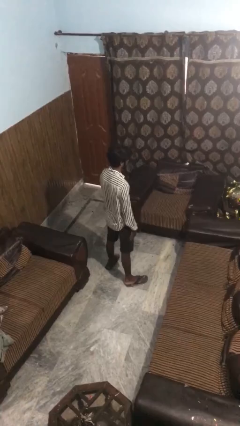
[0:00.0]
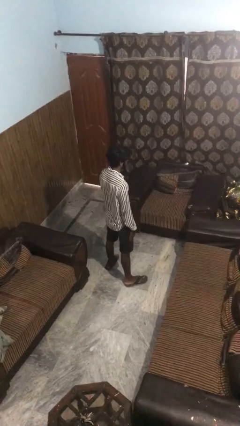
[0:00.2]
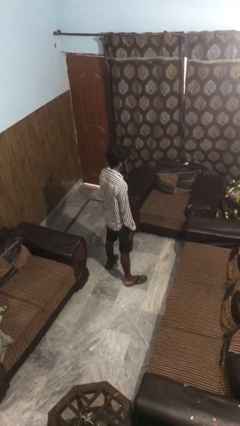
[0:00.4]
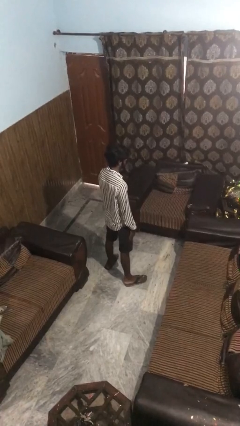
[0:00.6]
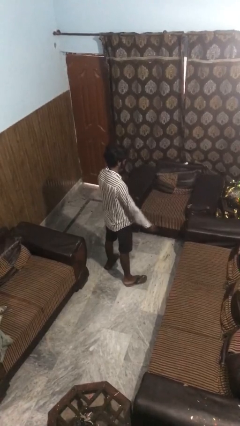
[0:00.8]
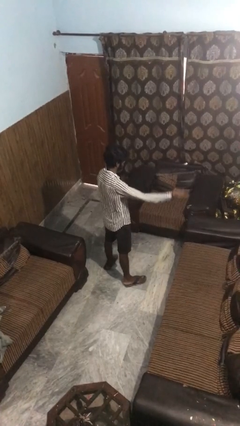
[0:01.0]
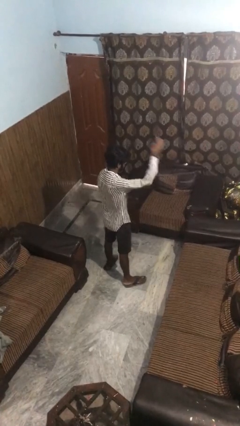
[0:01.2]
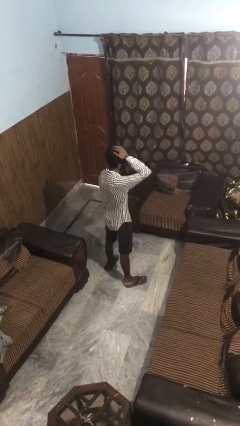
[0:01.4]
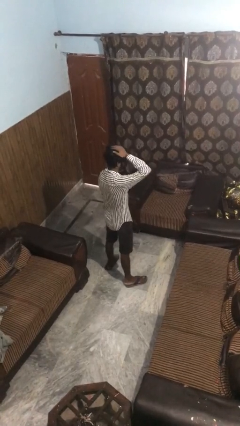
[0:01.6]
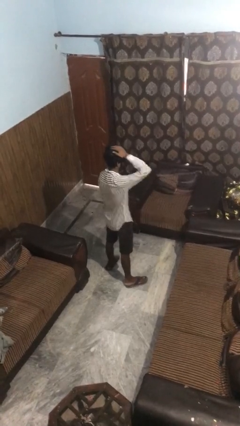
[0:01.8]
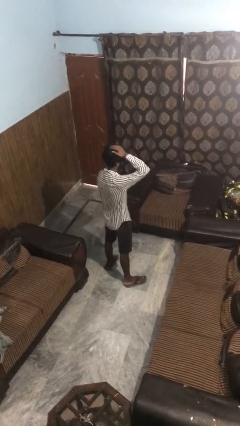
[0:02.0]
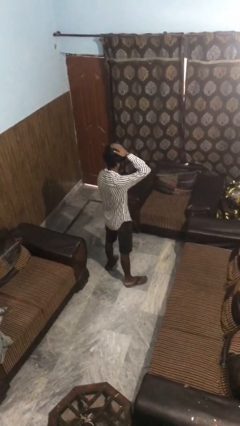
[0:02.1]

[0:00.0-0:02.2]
person pats head

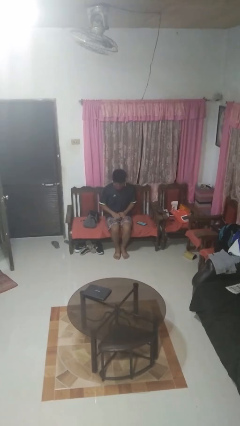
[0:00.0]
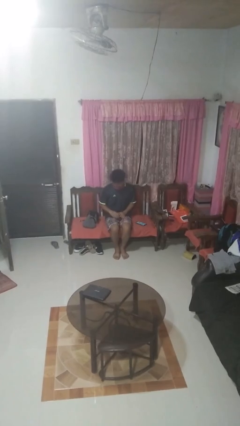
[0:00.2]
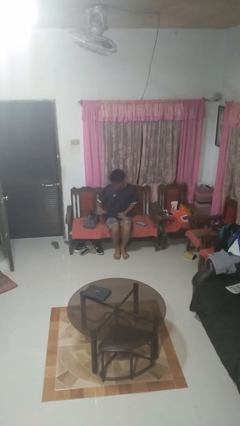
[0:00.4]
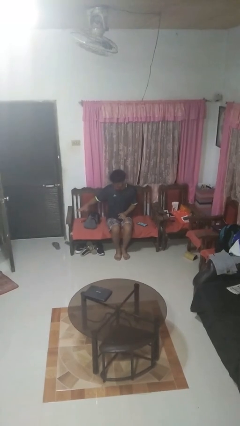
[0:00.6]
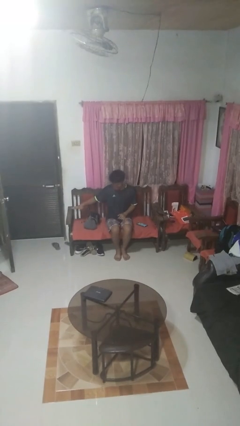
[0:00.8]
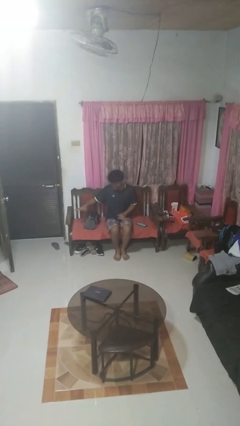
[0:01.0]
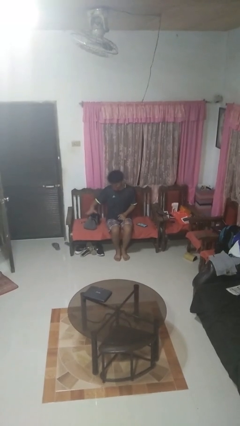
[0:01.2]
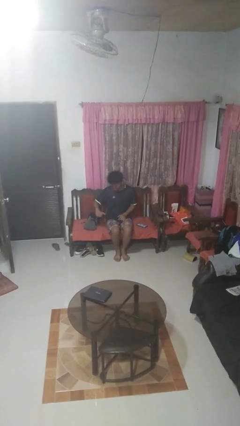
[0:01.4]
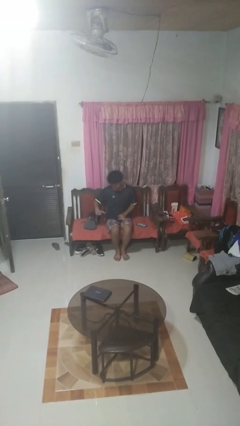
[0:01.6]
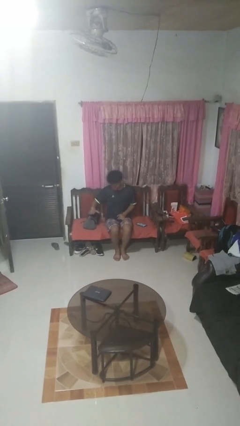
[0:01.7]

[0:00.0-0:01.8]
person waves hand over object

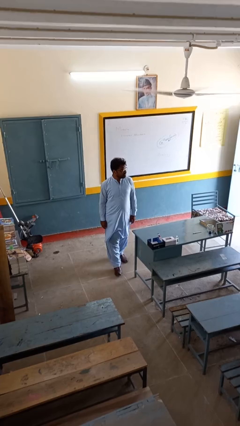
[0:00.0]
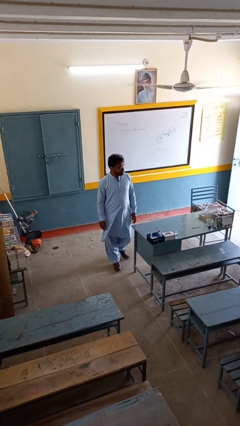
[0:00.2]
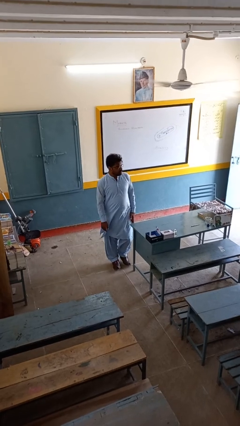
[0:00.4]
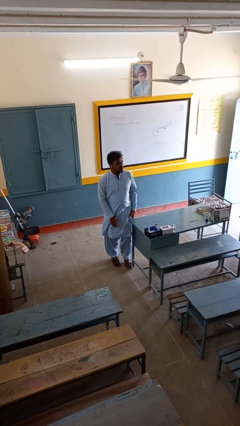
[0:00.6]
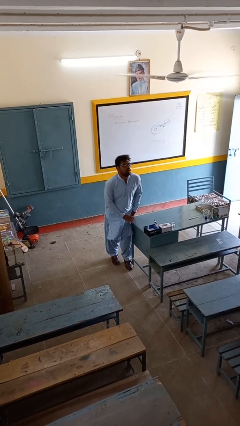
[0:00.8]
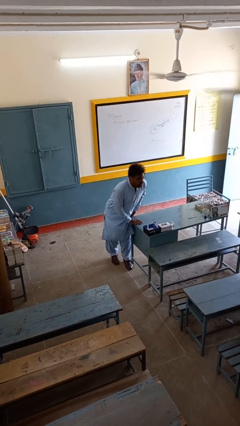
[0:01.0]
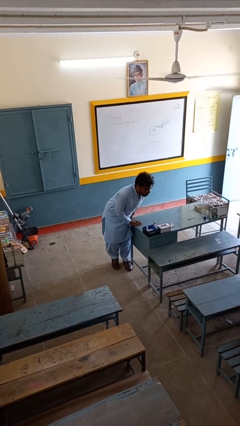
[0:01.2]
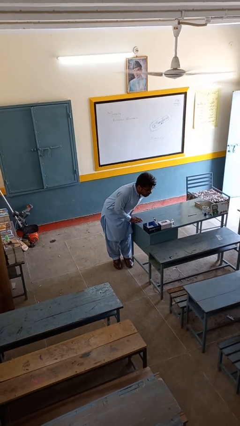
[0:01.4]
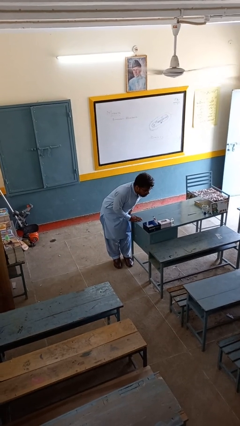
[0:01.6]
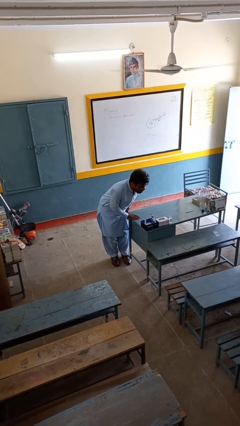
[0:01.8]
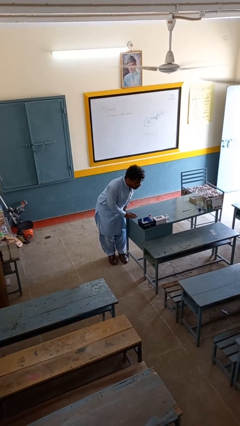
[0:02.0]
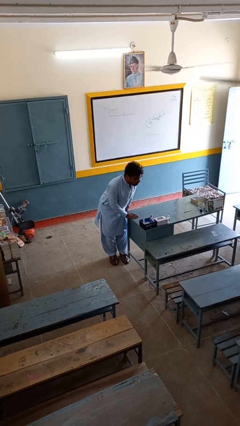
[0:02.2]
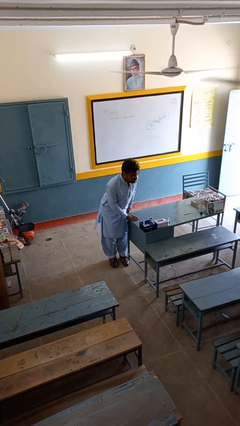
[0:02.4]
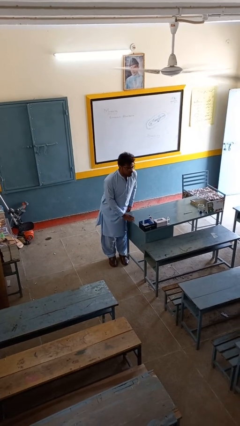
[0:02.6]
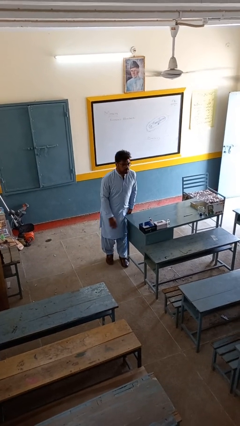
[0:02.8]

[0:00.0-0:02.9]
person bumps into table

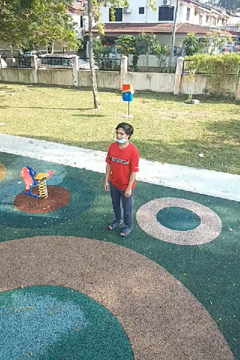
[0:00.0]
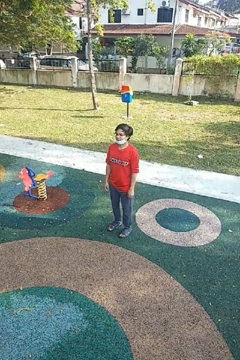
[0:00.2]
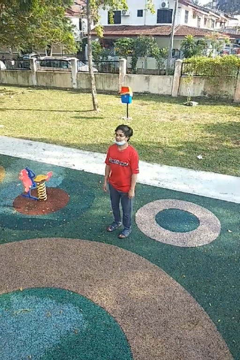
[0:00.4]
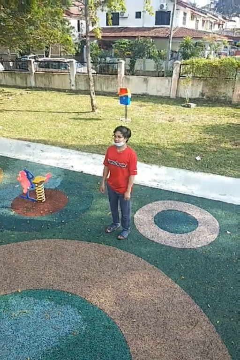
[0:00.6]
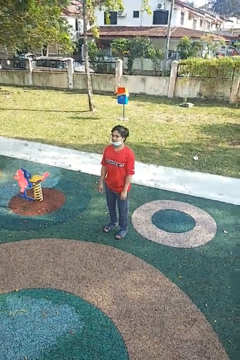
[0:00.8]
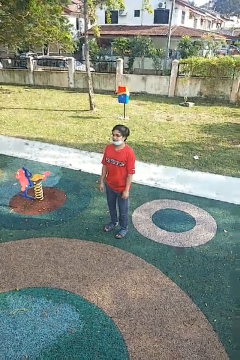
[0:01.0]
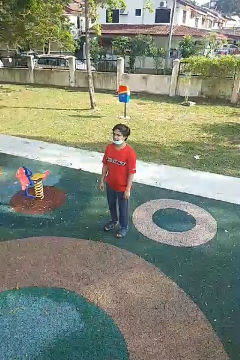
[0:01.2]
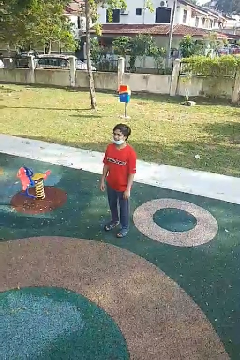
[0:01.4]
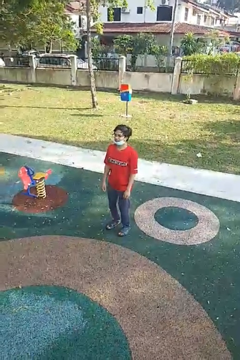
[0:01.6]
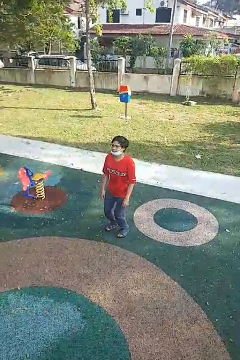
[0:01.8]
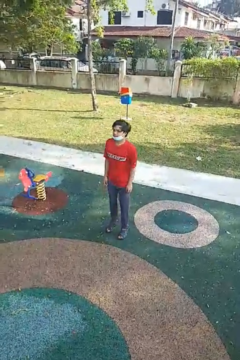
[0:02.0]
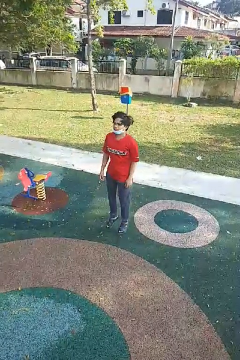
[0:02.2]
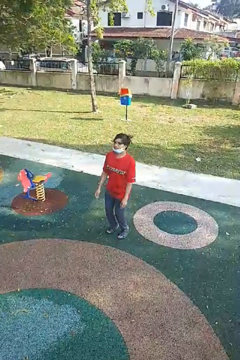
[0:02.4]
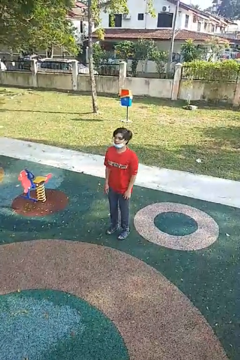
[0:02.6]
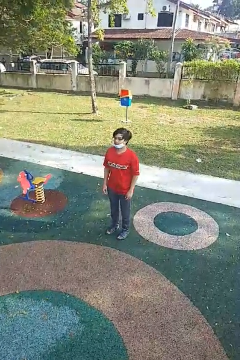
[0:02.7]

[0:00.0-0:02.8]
person jumps

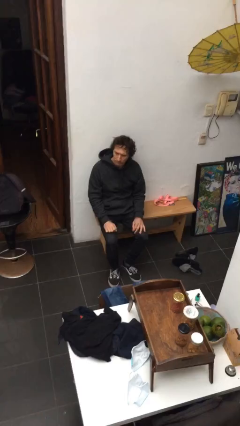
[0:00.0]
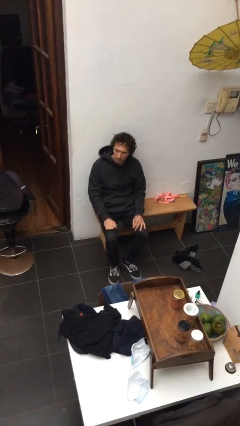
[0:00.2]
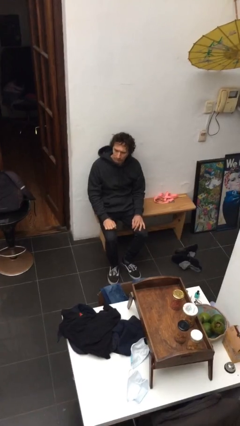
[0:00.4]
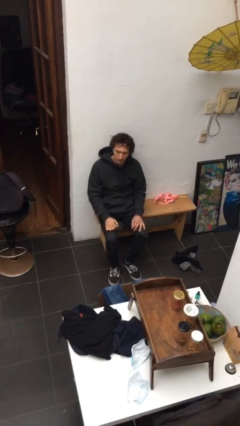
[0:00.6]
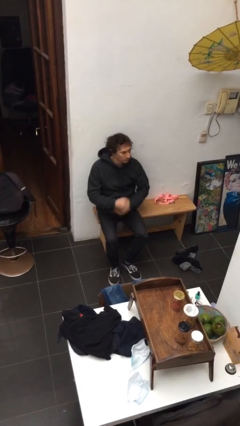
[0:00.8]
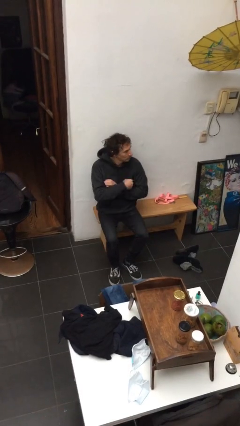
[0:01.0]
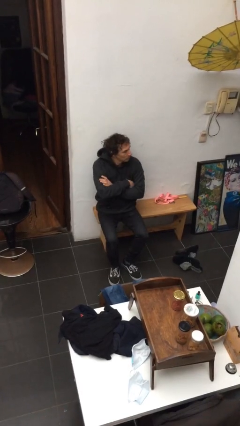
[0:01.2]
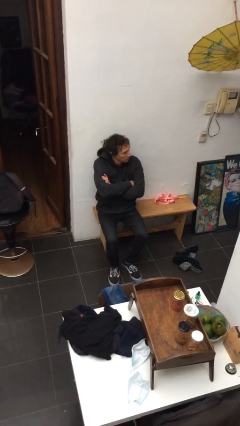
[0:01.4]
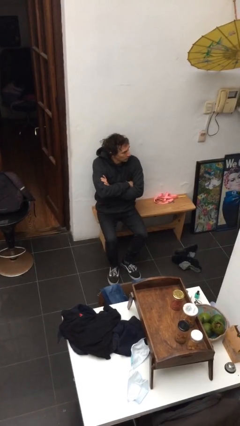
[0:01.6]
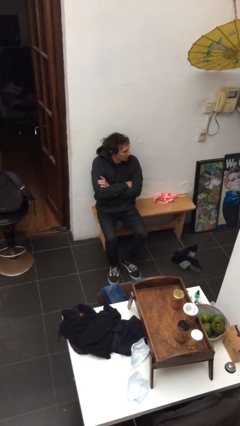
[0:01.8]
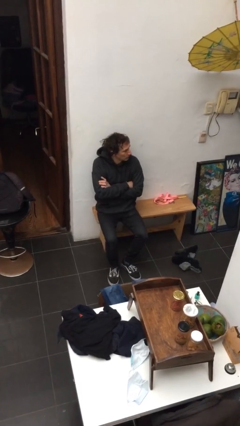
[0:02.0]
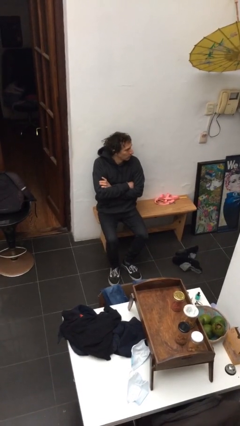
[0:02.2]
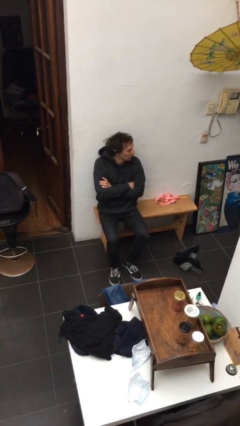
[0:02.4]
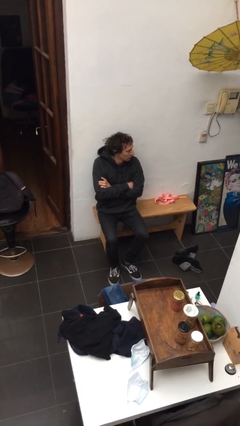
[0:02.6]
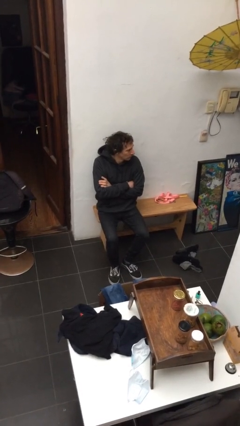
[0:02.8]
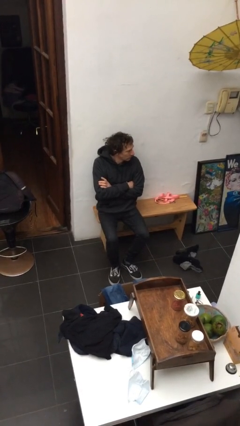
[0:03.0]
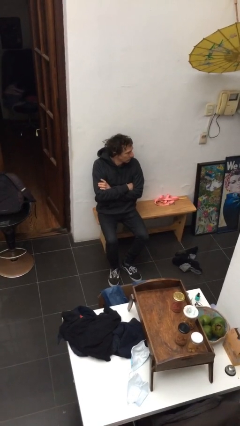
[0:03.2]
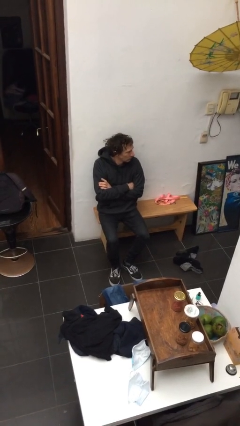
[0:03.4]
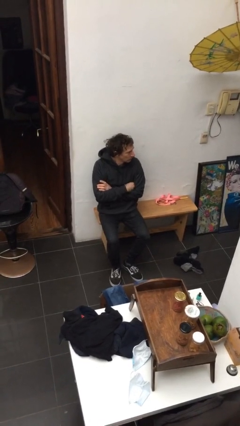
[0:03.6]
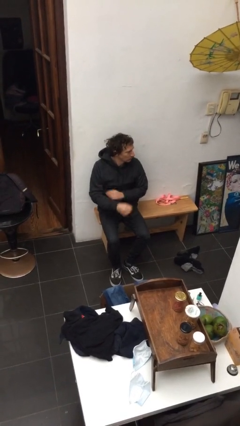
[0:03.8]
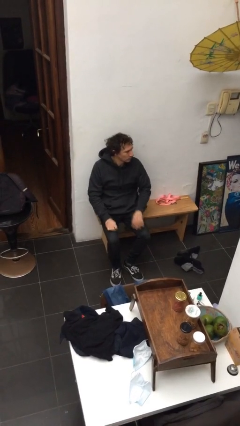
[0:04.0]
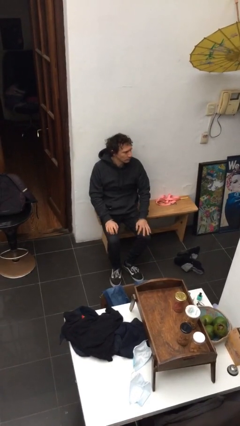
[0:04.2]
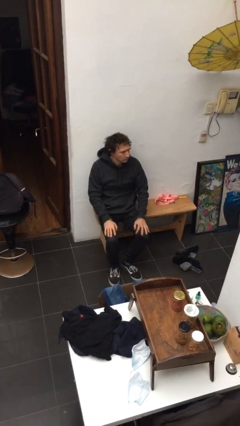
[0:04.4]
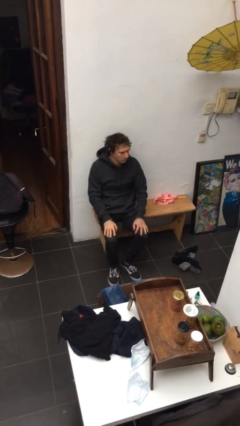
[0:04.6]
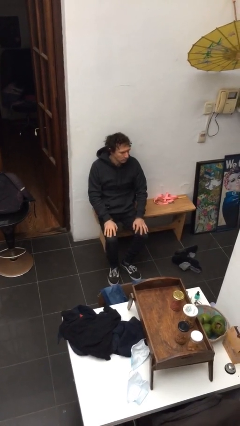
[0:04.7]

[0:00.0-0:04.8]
person crosses arms

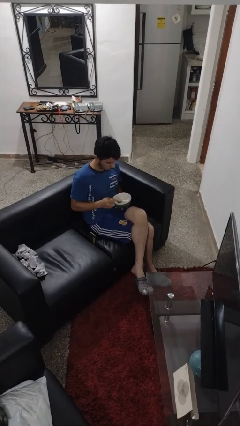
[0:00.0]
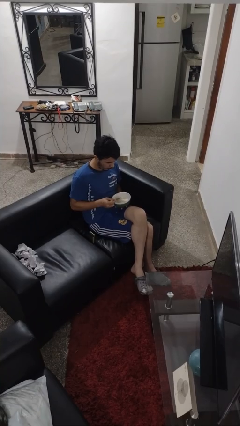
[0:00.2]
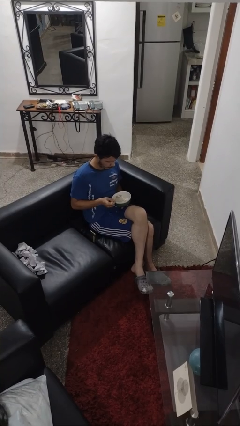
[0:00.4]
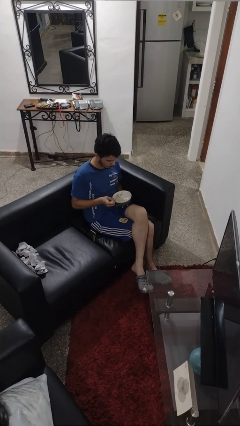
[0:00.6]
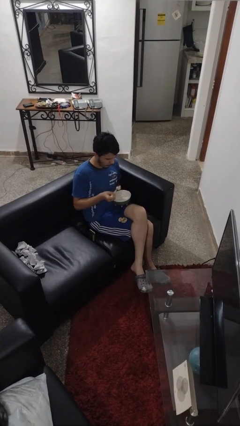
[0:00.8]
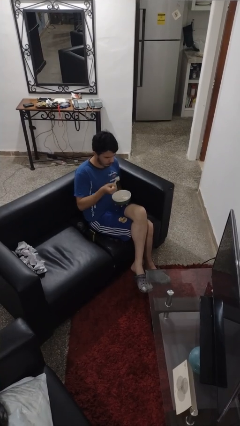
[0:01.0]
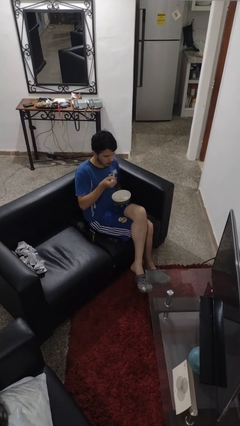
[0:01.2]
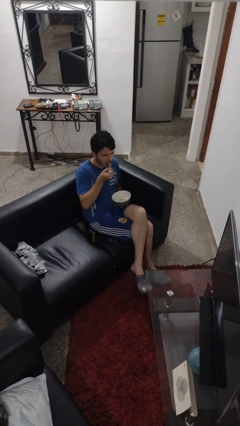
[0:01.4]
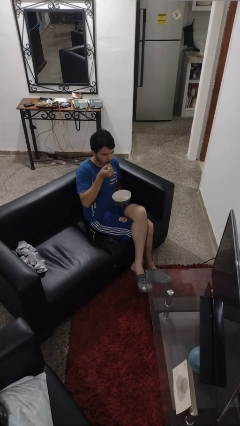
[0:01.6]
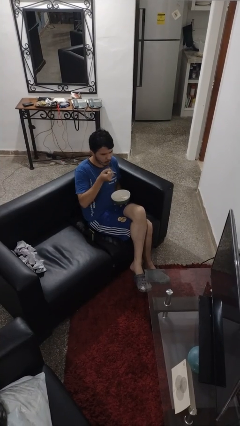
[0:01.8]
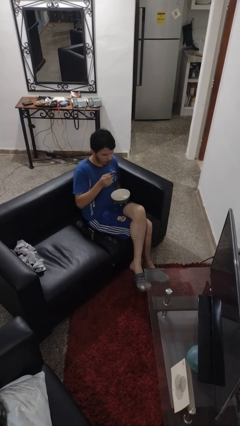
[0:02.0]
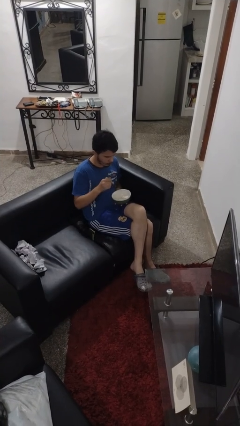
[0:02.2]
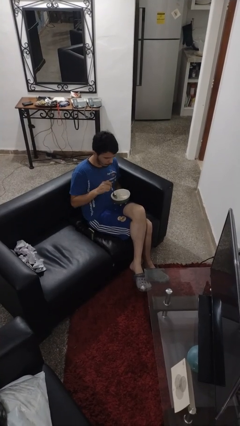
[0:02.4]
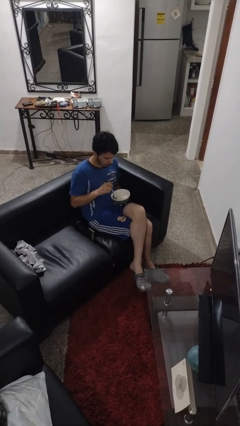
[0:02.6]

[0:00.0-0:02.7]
person eats with utensil

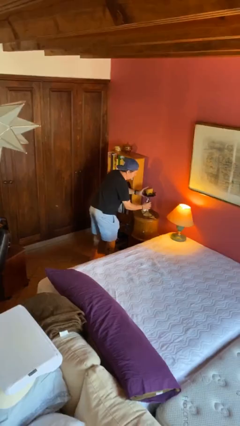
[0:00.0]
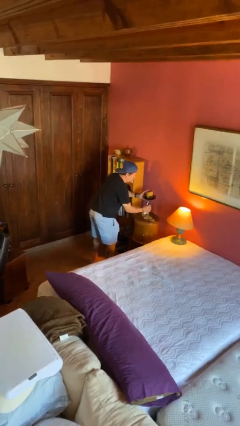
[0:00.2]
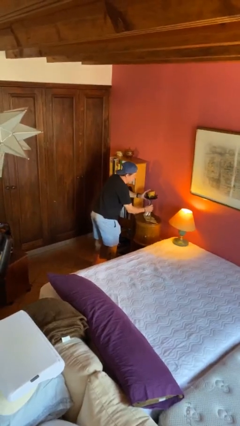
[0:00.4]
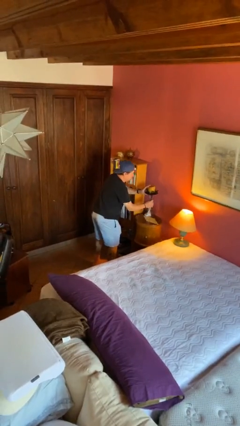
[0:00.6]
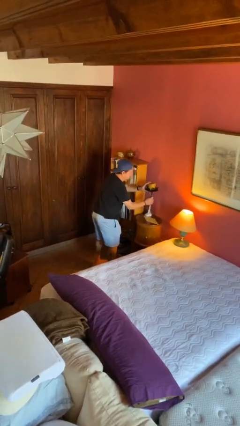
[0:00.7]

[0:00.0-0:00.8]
person picks up object from table
